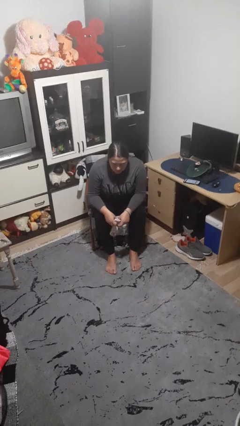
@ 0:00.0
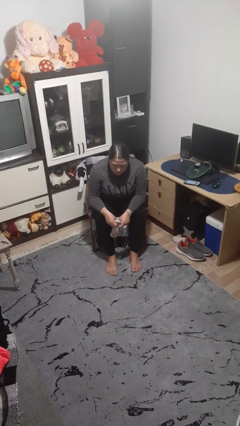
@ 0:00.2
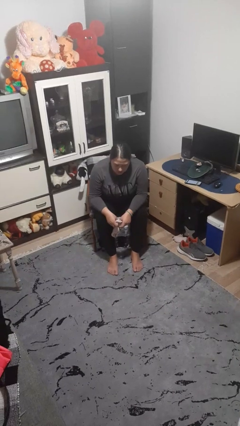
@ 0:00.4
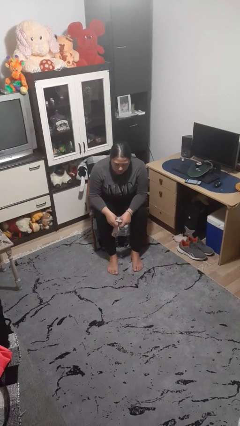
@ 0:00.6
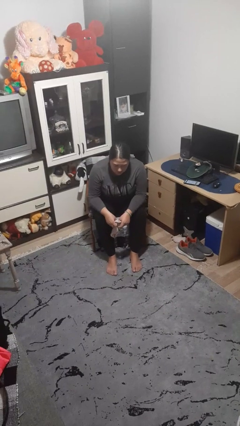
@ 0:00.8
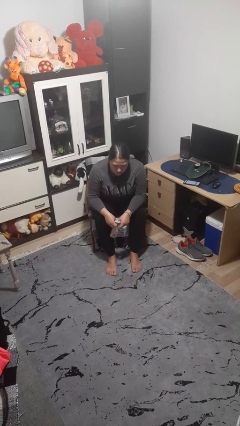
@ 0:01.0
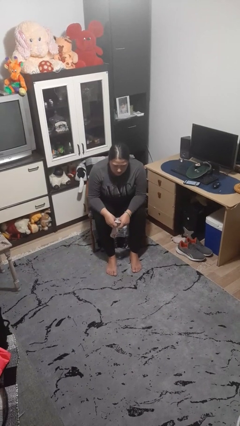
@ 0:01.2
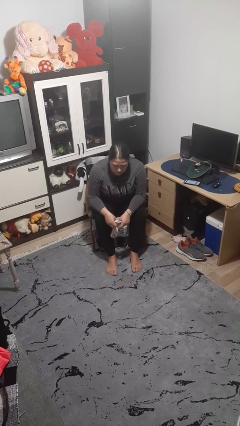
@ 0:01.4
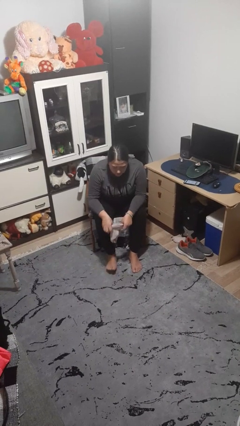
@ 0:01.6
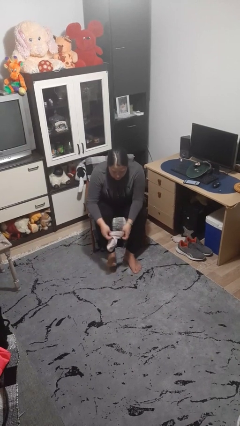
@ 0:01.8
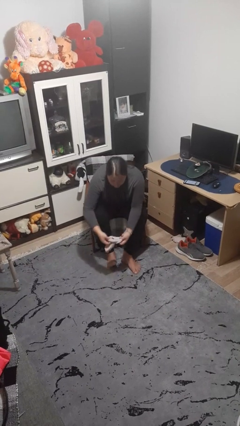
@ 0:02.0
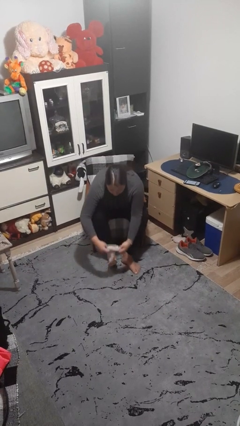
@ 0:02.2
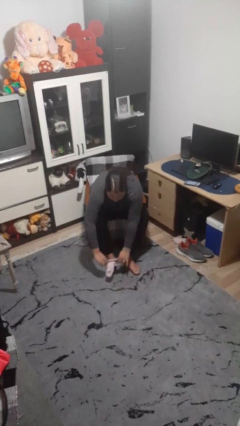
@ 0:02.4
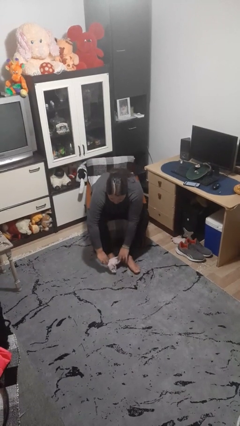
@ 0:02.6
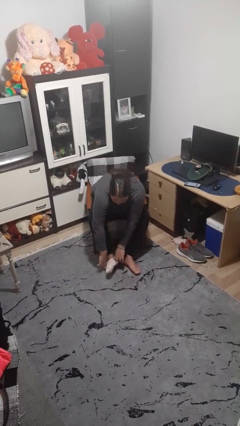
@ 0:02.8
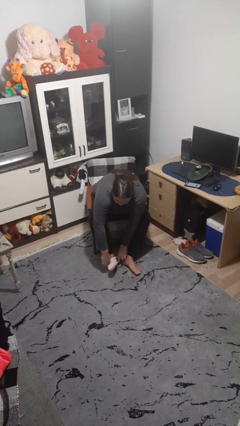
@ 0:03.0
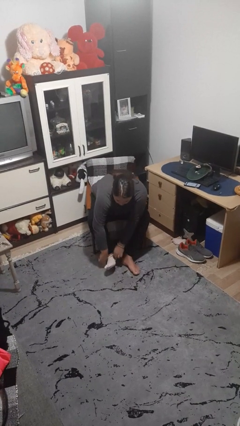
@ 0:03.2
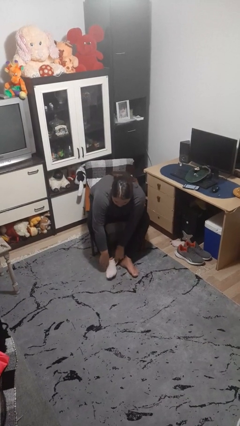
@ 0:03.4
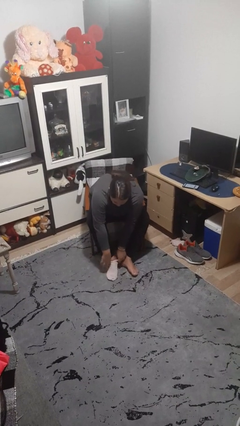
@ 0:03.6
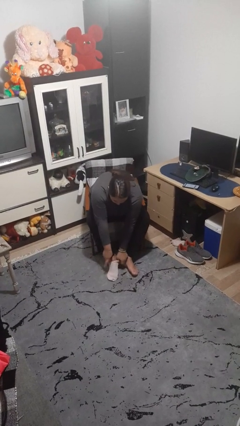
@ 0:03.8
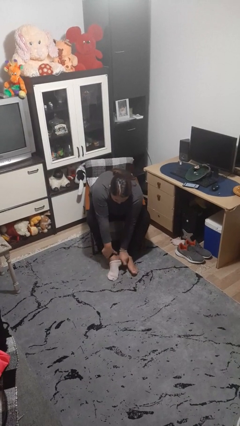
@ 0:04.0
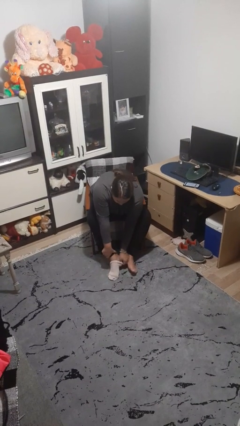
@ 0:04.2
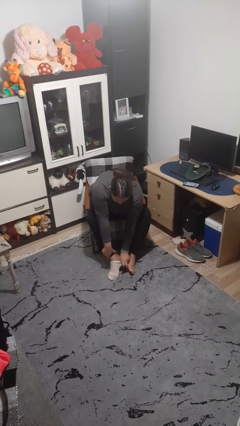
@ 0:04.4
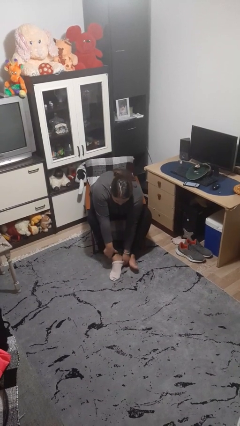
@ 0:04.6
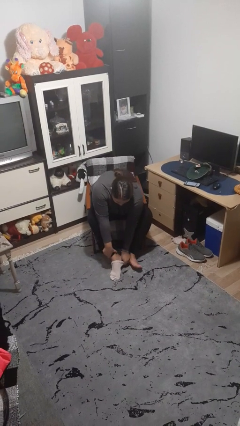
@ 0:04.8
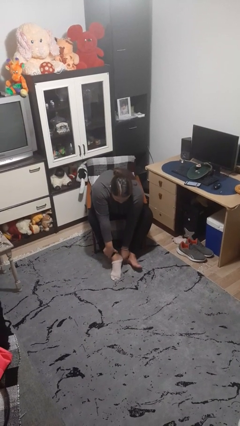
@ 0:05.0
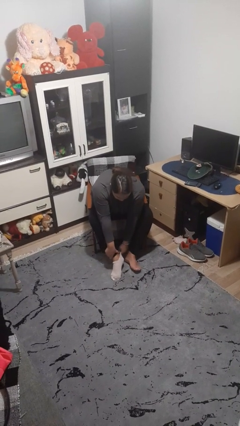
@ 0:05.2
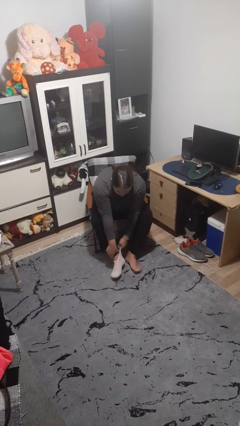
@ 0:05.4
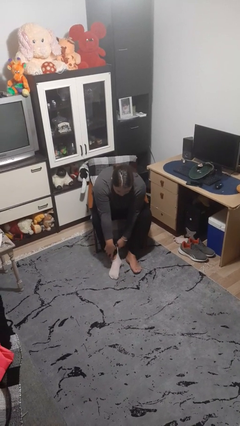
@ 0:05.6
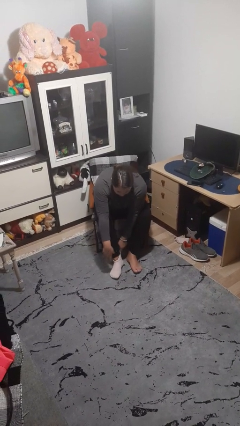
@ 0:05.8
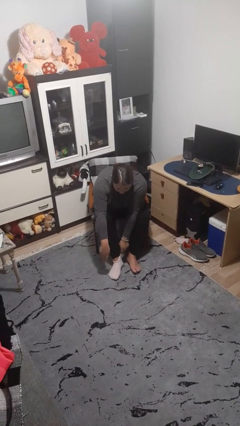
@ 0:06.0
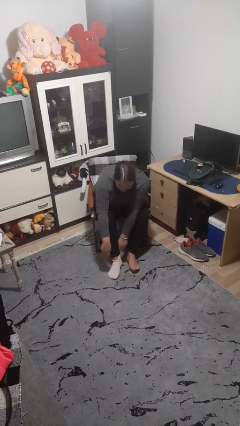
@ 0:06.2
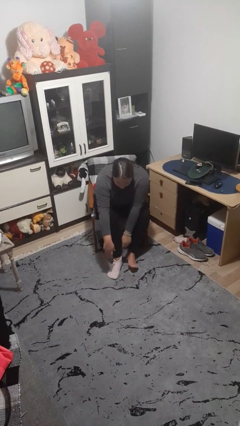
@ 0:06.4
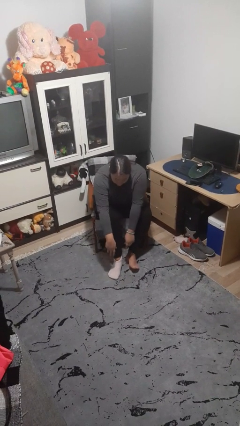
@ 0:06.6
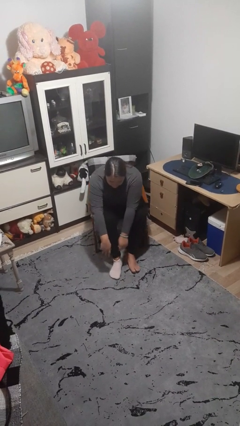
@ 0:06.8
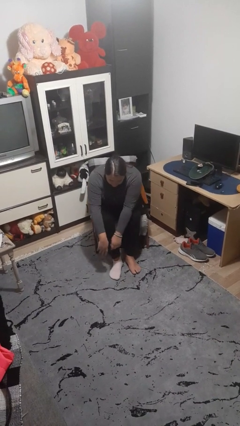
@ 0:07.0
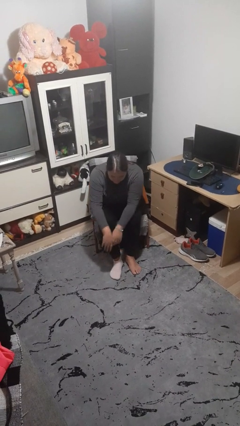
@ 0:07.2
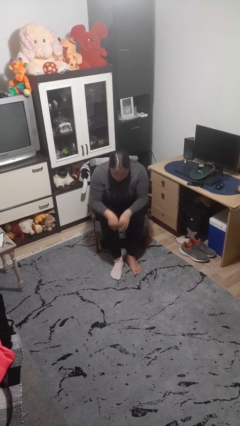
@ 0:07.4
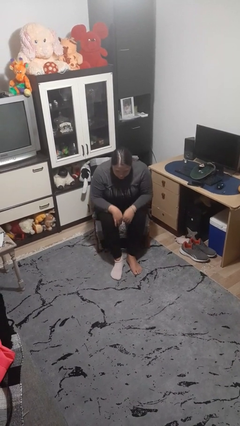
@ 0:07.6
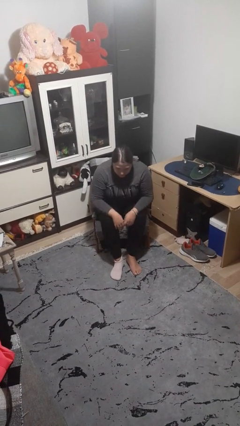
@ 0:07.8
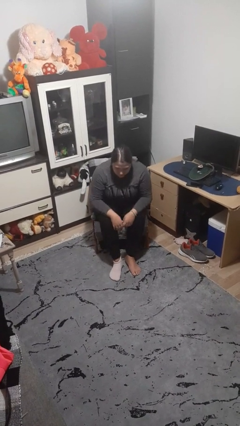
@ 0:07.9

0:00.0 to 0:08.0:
person puts on socks

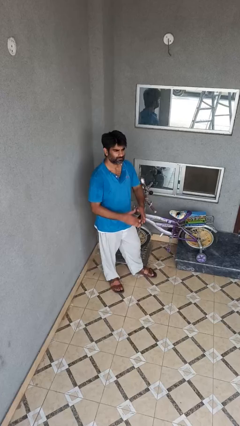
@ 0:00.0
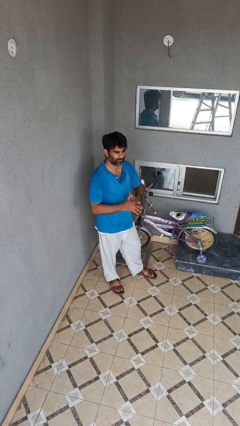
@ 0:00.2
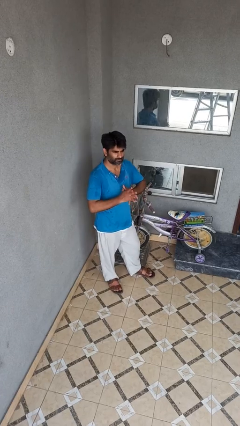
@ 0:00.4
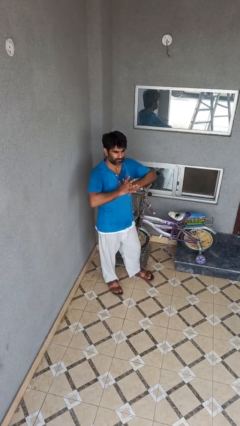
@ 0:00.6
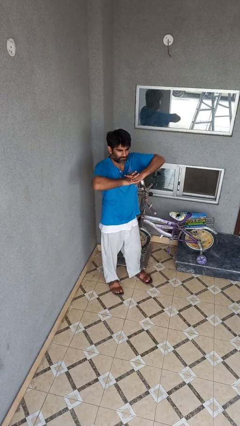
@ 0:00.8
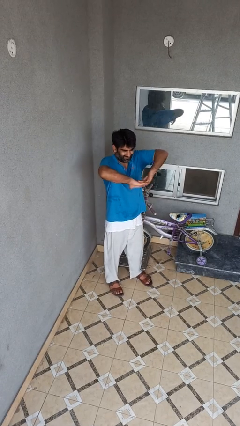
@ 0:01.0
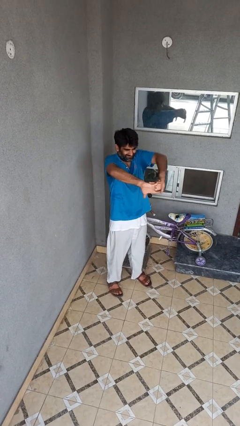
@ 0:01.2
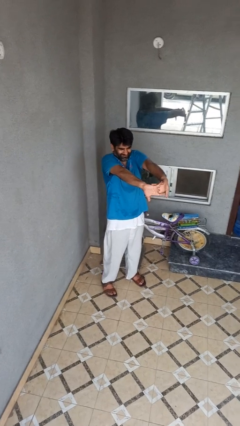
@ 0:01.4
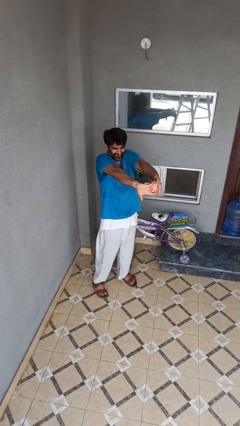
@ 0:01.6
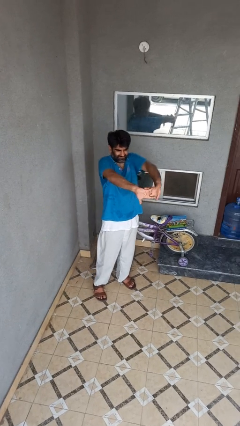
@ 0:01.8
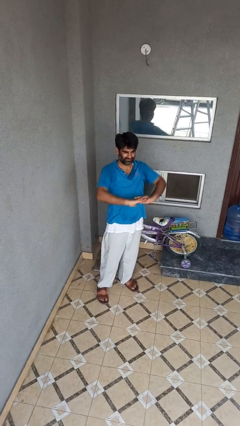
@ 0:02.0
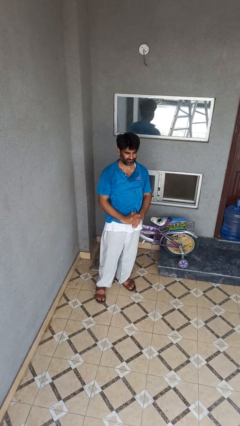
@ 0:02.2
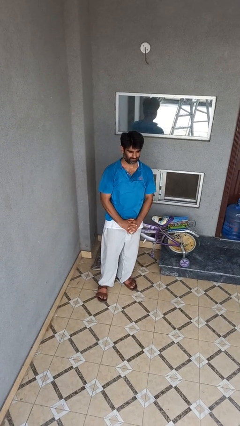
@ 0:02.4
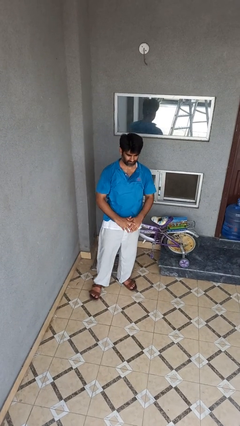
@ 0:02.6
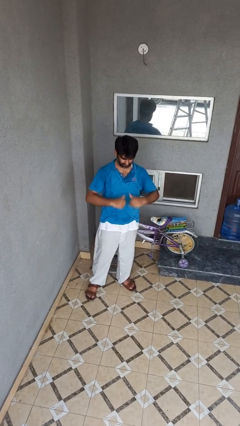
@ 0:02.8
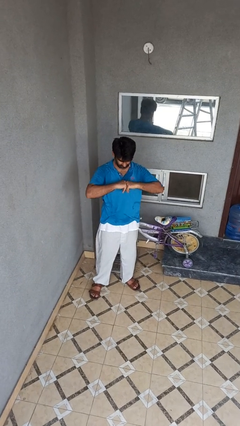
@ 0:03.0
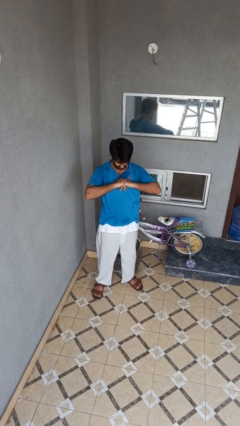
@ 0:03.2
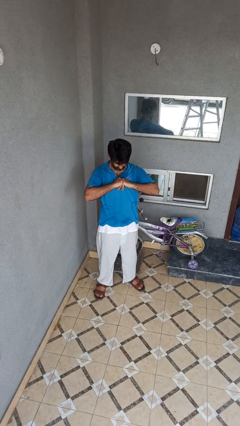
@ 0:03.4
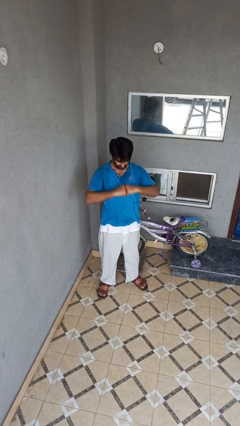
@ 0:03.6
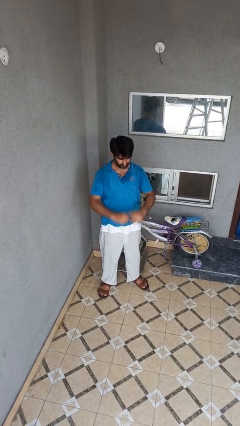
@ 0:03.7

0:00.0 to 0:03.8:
person cracks knuckles

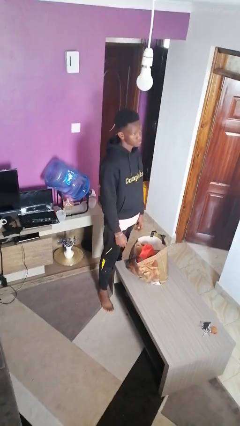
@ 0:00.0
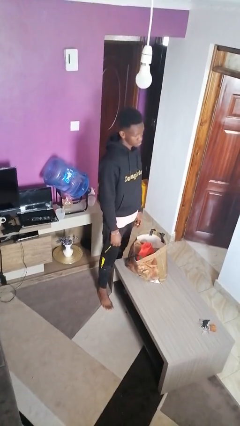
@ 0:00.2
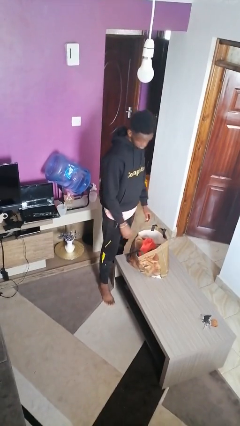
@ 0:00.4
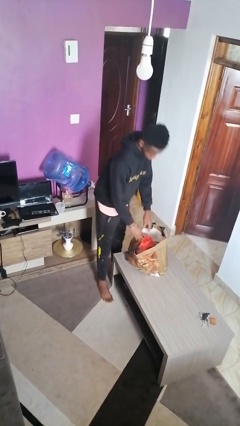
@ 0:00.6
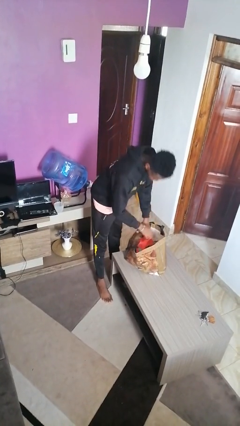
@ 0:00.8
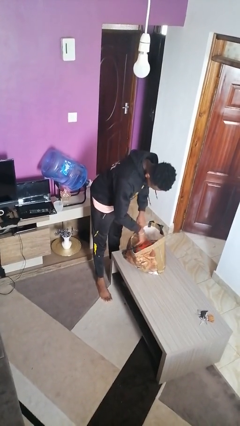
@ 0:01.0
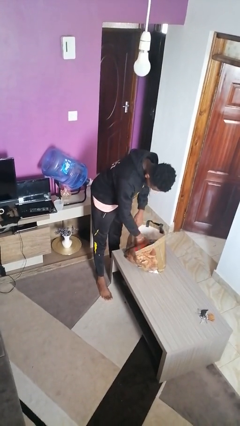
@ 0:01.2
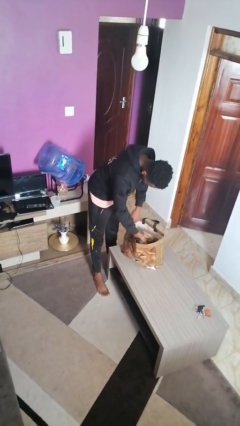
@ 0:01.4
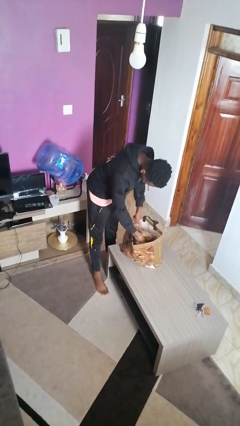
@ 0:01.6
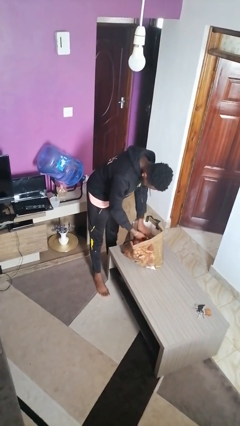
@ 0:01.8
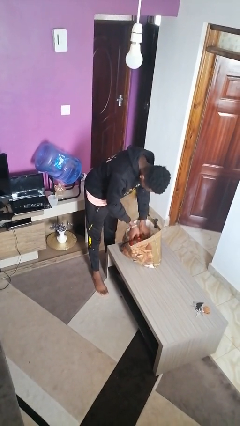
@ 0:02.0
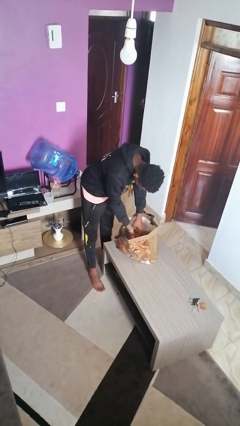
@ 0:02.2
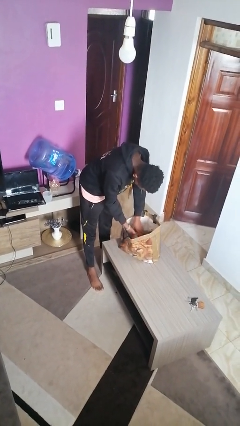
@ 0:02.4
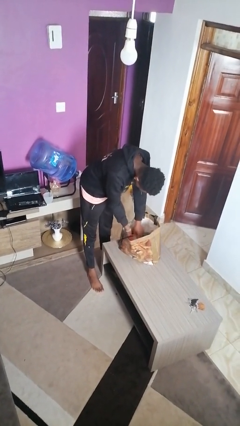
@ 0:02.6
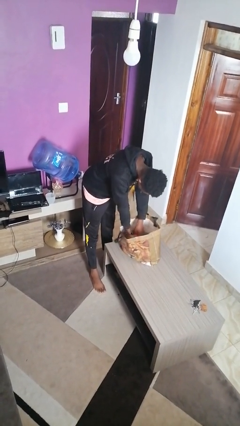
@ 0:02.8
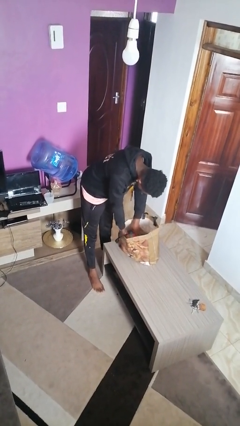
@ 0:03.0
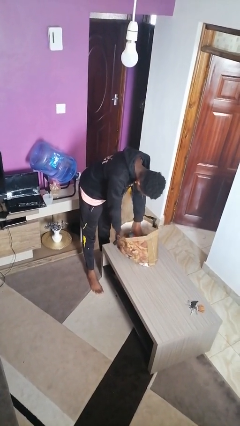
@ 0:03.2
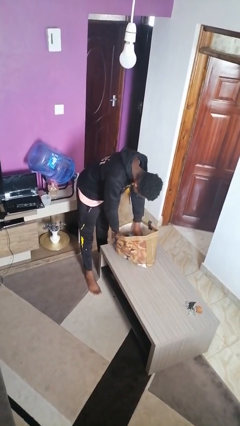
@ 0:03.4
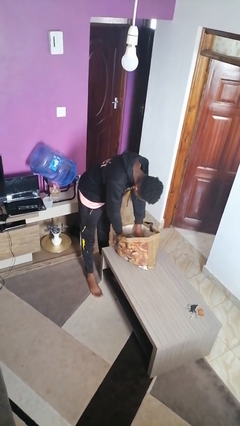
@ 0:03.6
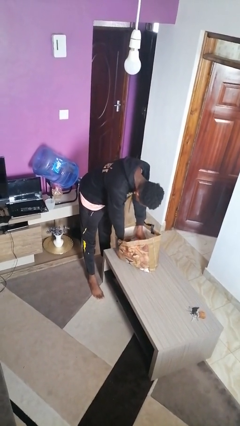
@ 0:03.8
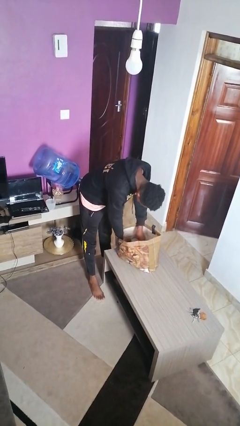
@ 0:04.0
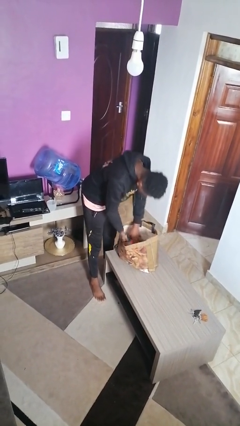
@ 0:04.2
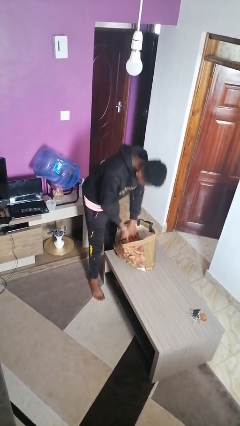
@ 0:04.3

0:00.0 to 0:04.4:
person searches in bag

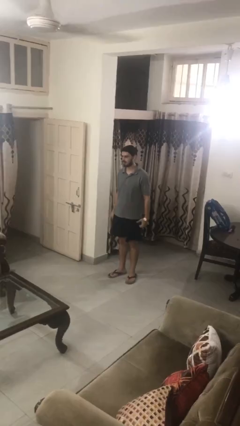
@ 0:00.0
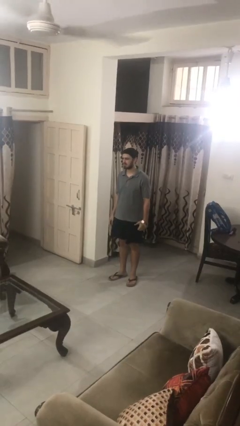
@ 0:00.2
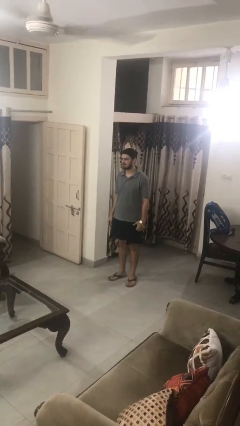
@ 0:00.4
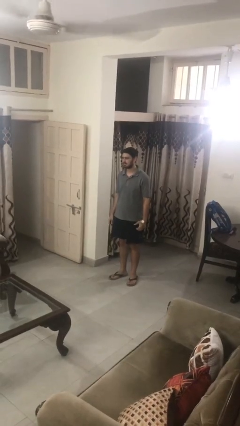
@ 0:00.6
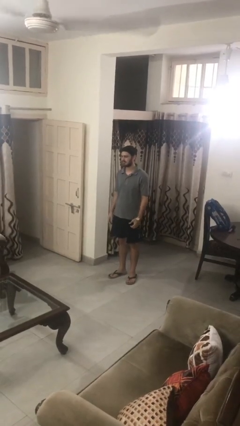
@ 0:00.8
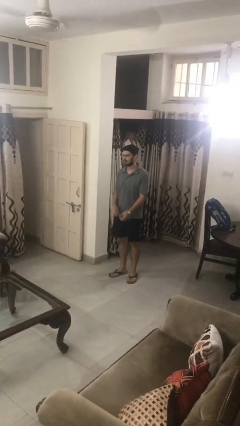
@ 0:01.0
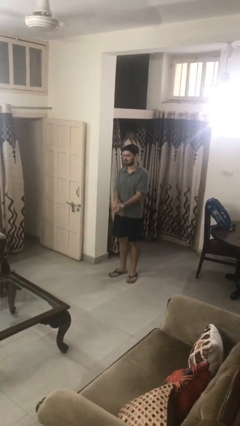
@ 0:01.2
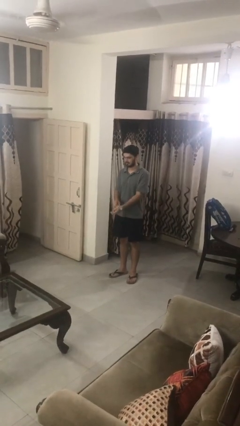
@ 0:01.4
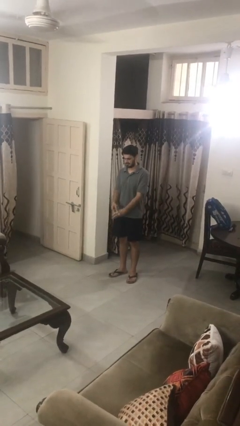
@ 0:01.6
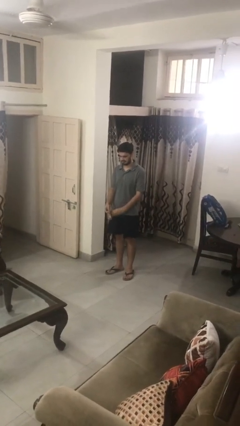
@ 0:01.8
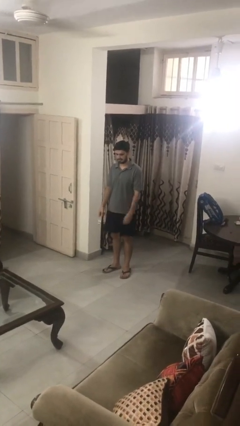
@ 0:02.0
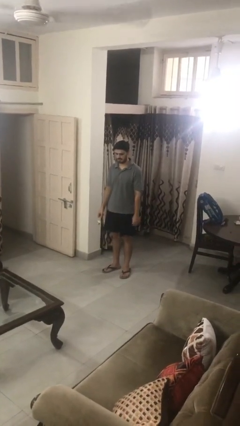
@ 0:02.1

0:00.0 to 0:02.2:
person takes off wristwatch
